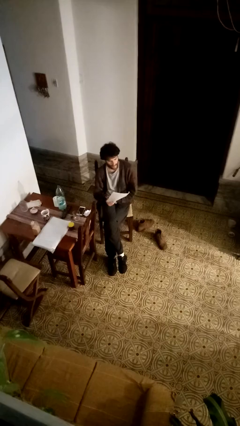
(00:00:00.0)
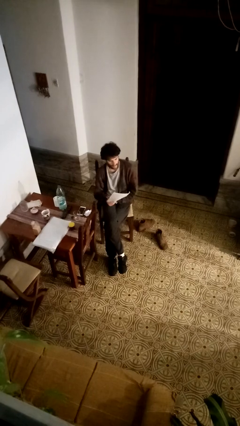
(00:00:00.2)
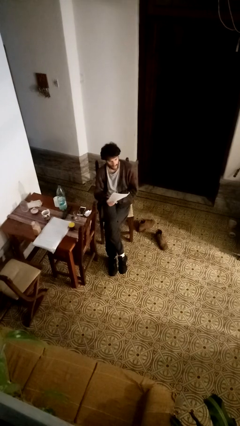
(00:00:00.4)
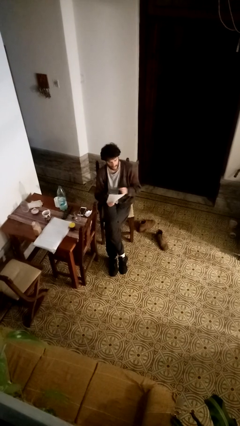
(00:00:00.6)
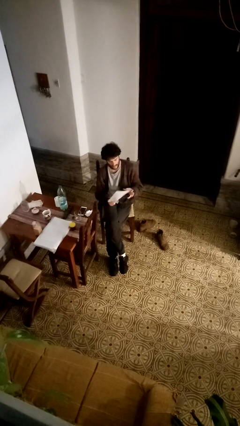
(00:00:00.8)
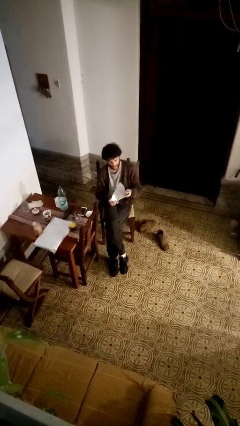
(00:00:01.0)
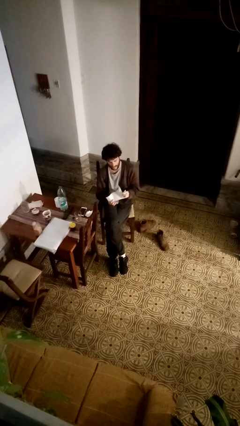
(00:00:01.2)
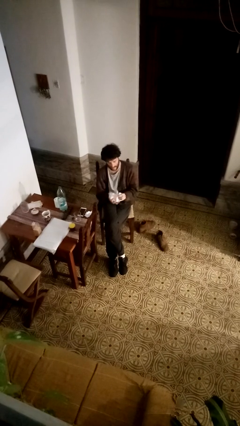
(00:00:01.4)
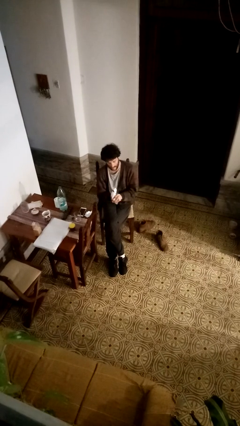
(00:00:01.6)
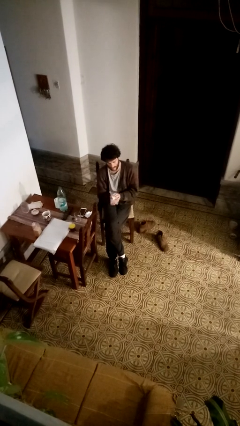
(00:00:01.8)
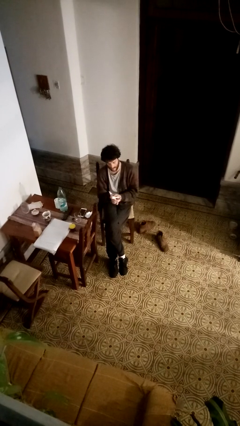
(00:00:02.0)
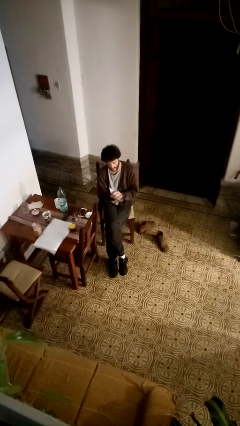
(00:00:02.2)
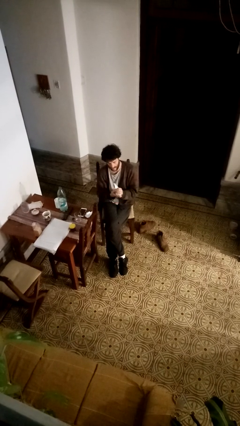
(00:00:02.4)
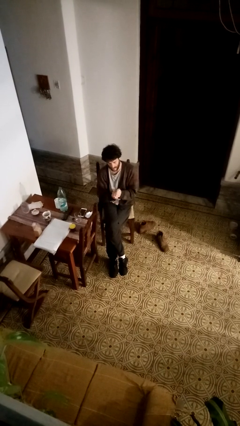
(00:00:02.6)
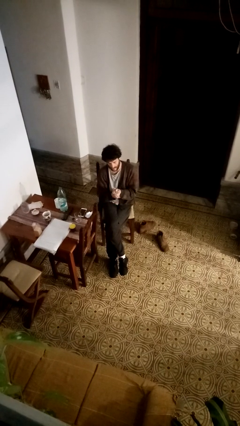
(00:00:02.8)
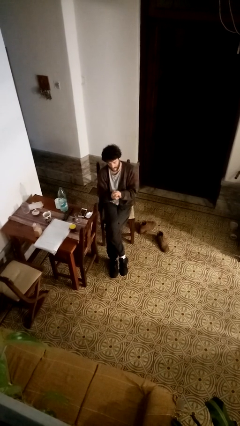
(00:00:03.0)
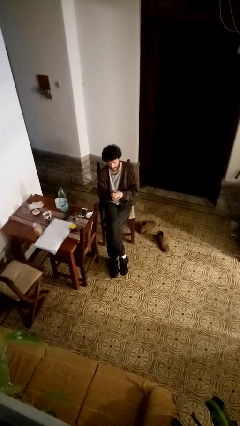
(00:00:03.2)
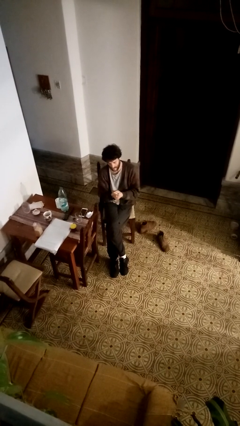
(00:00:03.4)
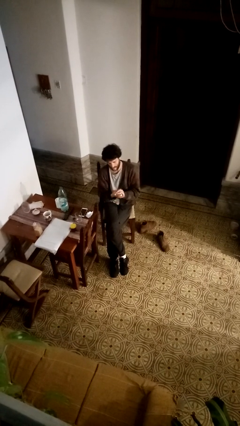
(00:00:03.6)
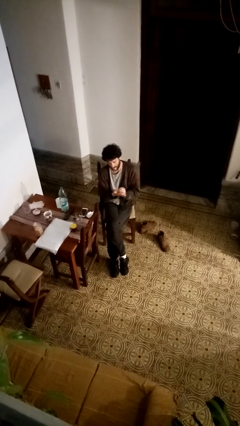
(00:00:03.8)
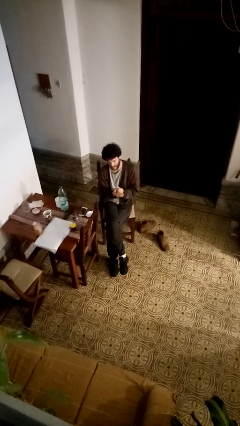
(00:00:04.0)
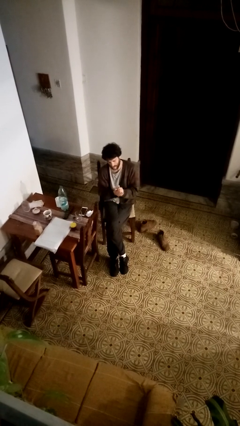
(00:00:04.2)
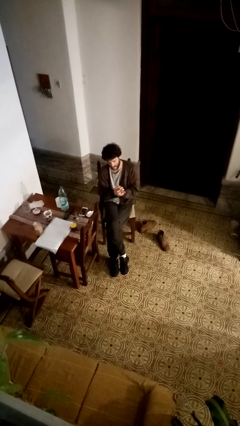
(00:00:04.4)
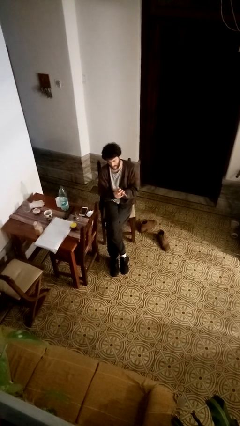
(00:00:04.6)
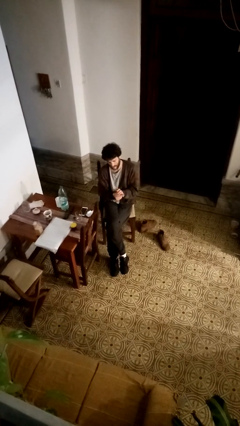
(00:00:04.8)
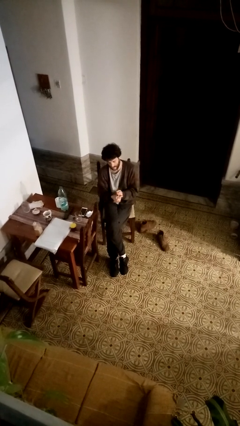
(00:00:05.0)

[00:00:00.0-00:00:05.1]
person crumples paper

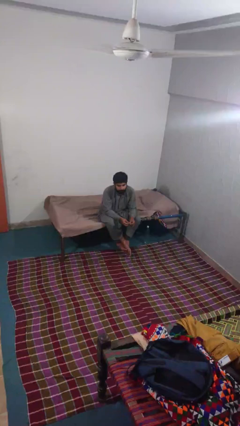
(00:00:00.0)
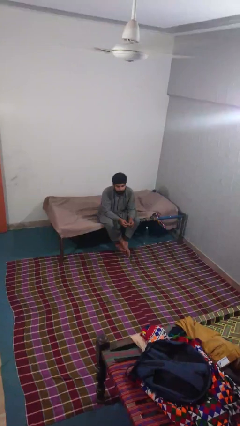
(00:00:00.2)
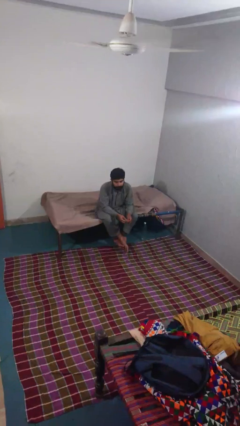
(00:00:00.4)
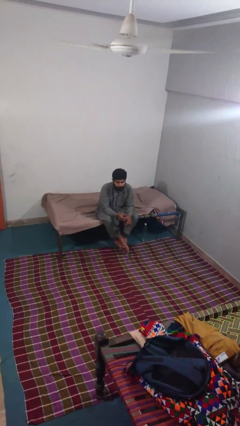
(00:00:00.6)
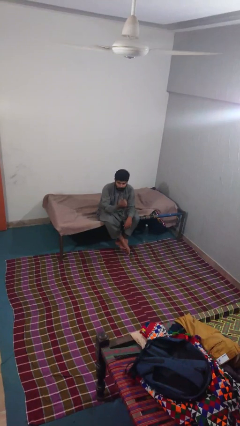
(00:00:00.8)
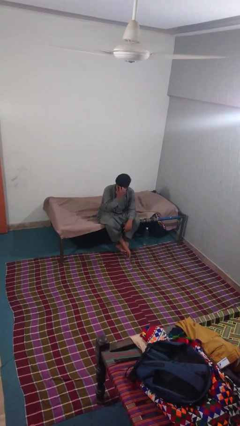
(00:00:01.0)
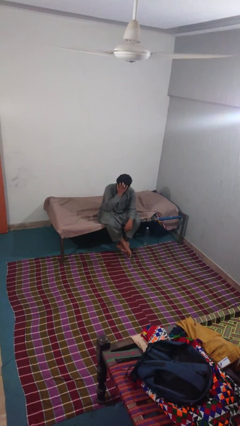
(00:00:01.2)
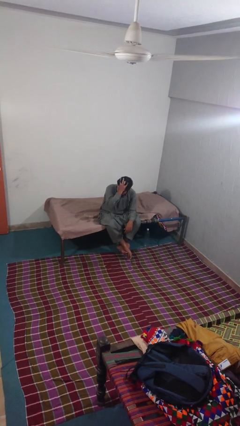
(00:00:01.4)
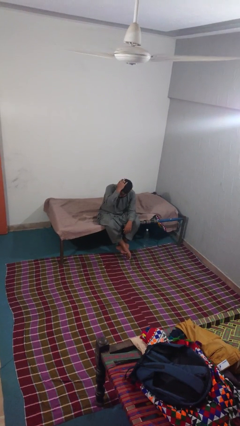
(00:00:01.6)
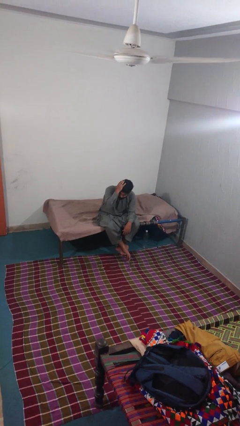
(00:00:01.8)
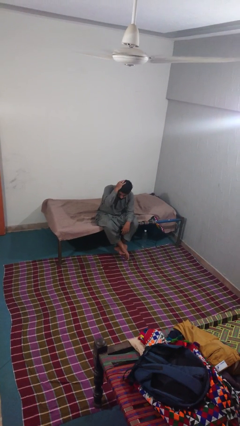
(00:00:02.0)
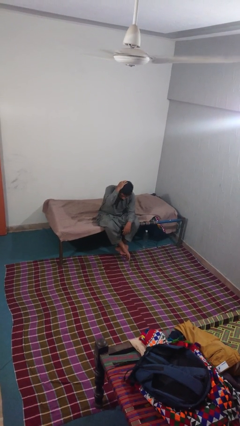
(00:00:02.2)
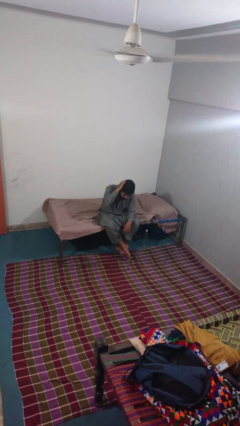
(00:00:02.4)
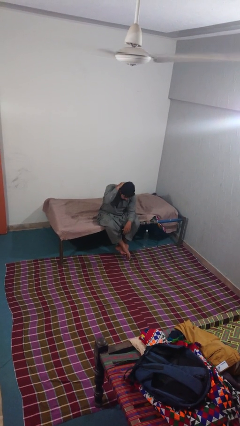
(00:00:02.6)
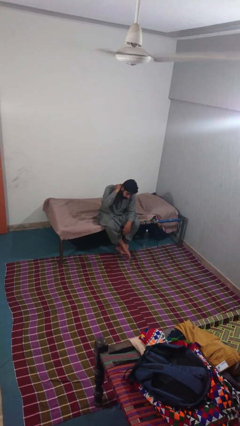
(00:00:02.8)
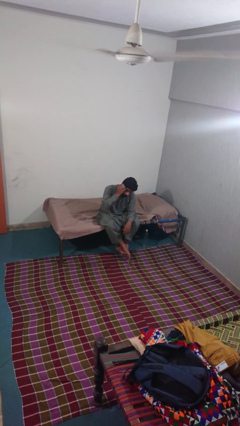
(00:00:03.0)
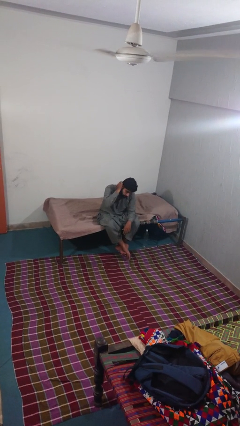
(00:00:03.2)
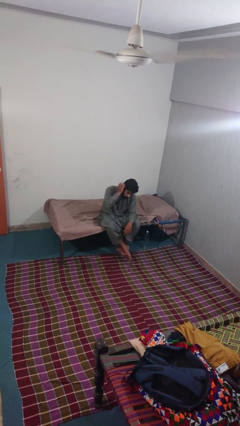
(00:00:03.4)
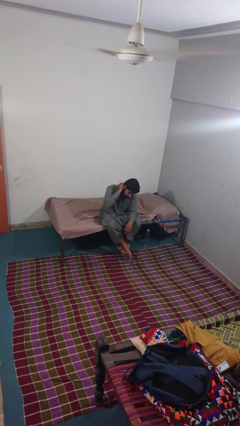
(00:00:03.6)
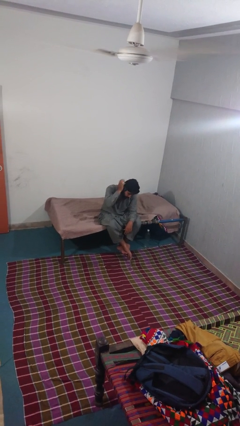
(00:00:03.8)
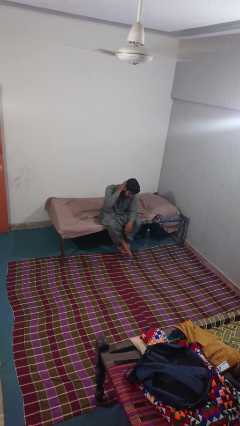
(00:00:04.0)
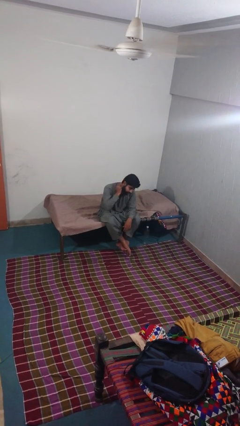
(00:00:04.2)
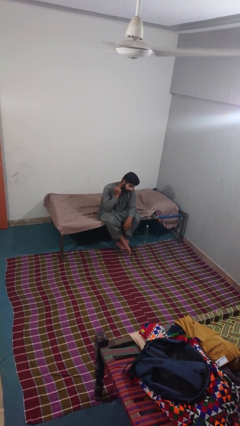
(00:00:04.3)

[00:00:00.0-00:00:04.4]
person strokes hair

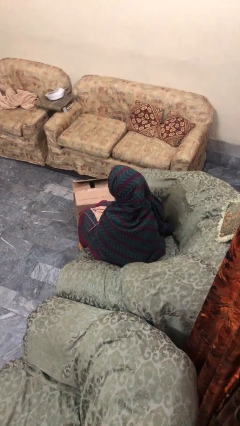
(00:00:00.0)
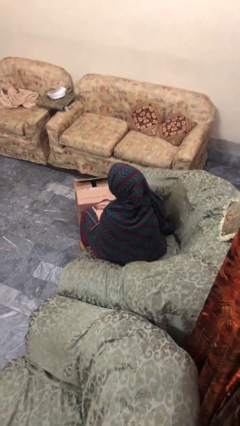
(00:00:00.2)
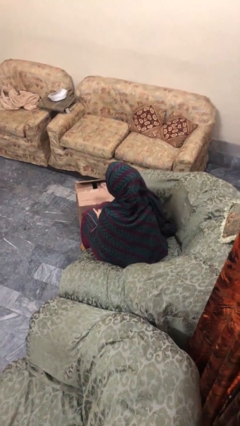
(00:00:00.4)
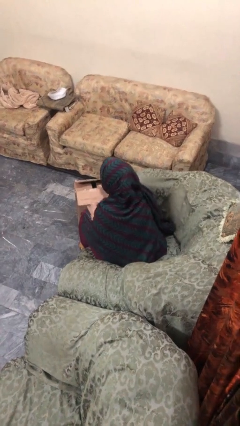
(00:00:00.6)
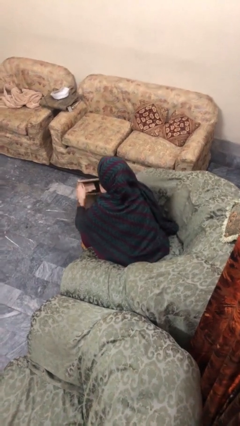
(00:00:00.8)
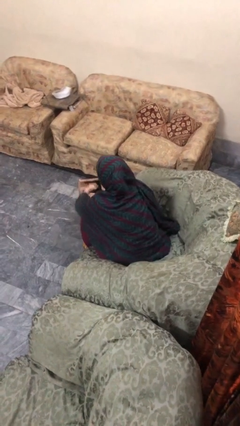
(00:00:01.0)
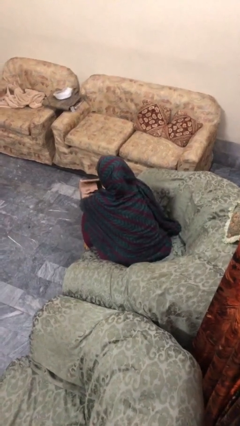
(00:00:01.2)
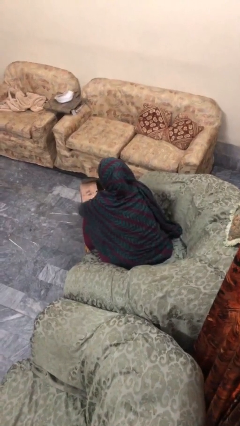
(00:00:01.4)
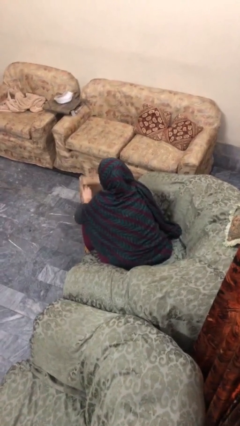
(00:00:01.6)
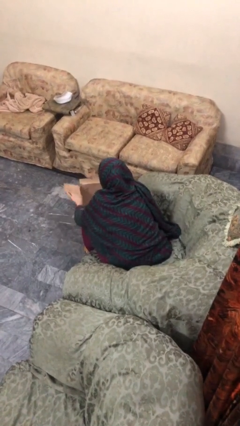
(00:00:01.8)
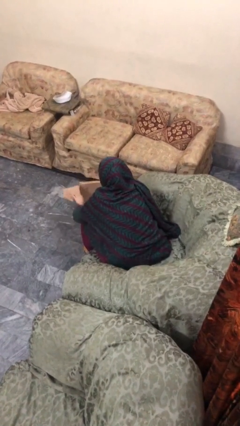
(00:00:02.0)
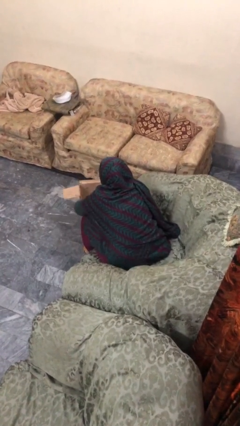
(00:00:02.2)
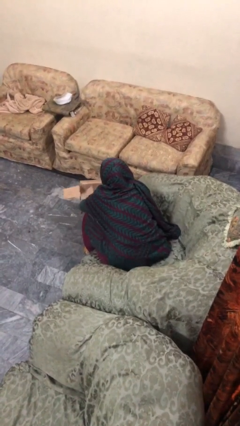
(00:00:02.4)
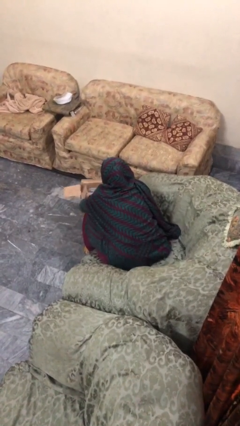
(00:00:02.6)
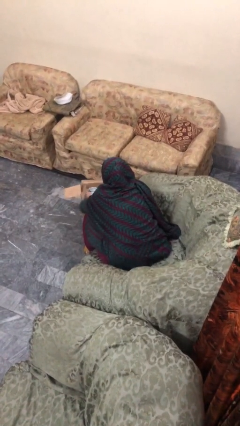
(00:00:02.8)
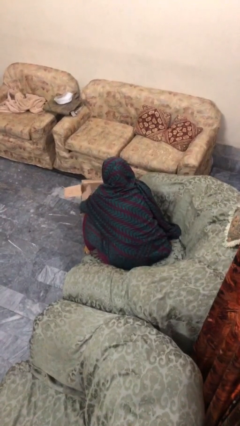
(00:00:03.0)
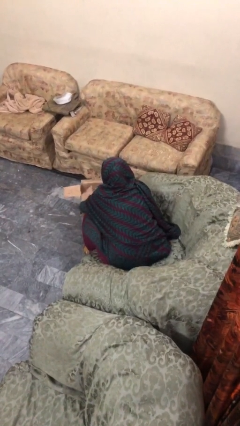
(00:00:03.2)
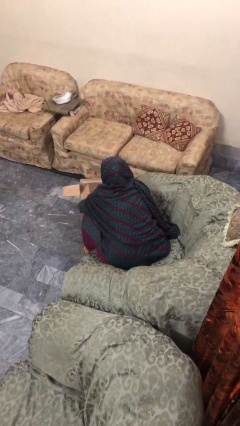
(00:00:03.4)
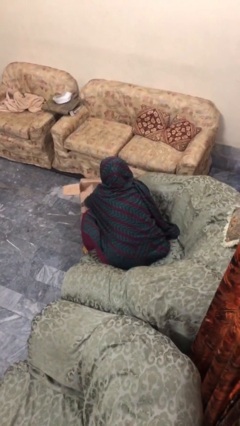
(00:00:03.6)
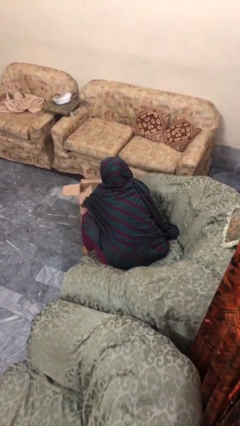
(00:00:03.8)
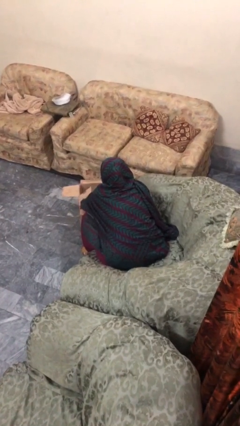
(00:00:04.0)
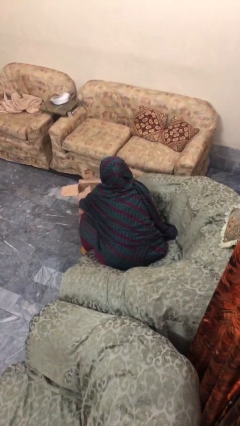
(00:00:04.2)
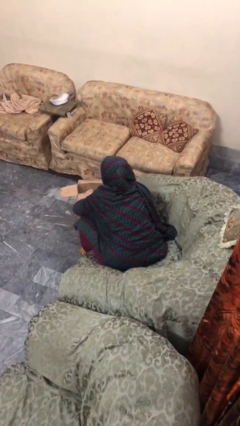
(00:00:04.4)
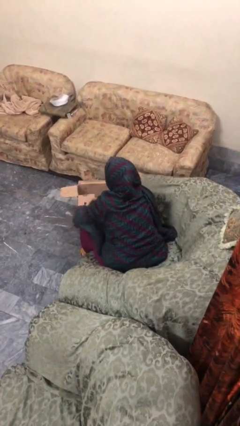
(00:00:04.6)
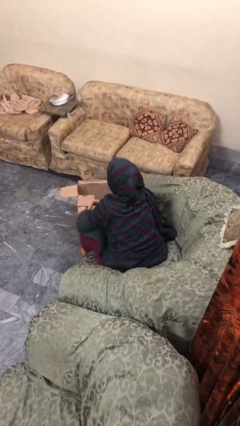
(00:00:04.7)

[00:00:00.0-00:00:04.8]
person searches in box

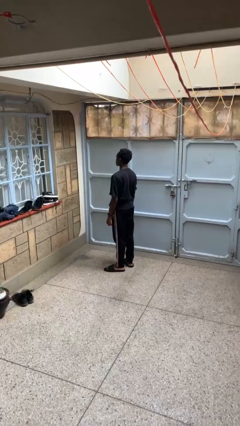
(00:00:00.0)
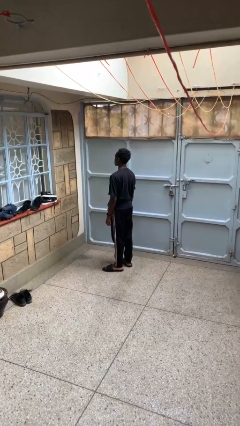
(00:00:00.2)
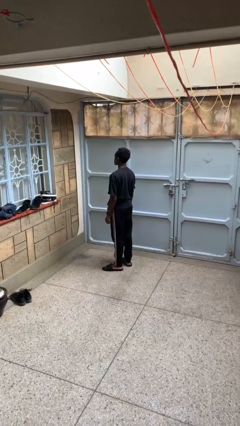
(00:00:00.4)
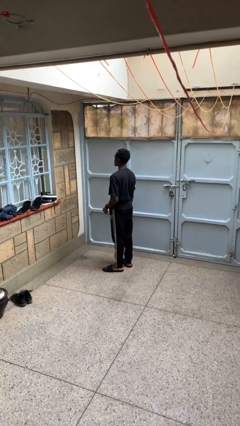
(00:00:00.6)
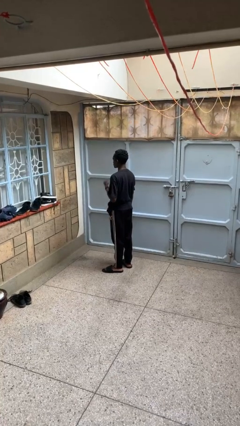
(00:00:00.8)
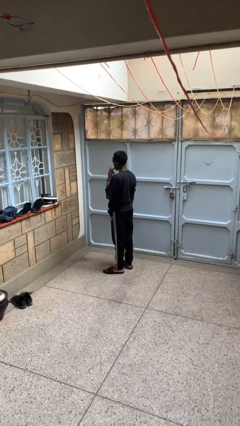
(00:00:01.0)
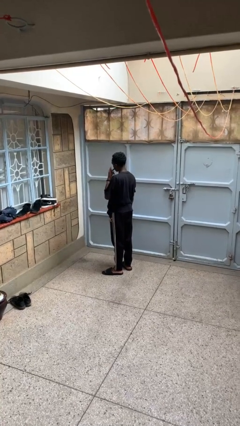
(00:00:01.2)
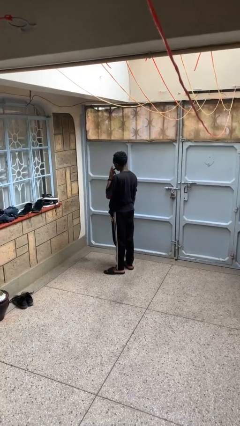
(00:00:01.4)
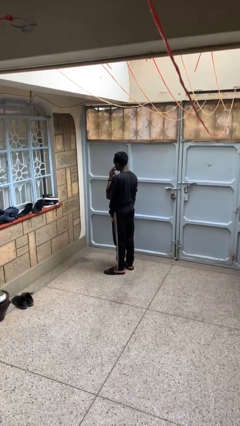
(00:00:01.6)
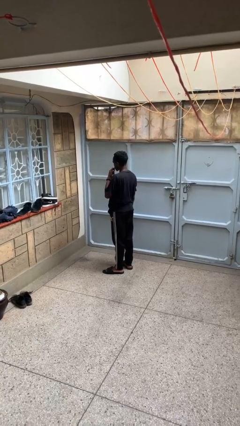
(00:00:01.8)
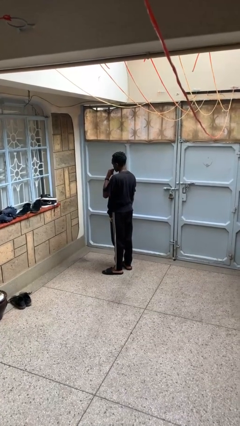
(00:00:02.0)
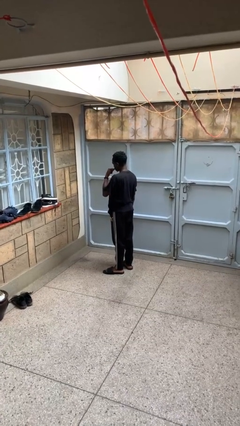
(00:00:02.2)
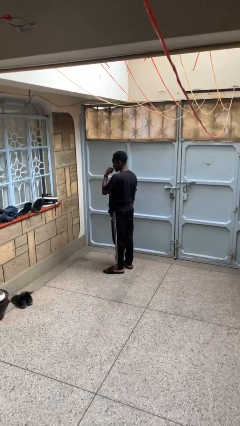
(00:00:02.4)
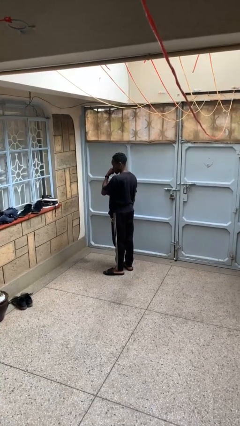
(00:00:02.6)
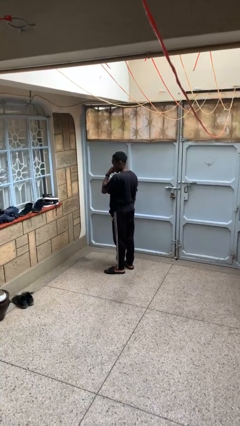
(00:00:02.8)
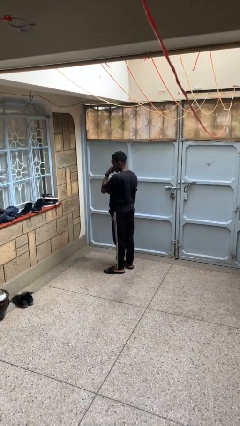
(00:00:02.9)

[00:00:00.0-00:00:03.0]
person licks fingers

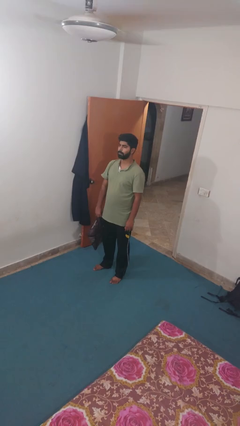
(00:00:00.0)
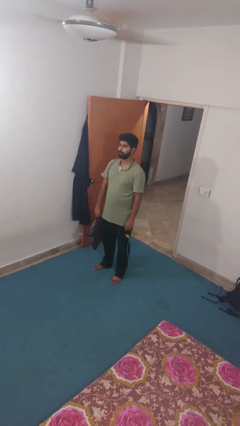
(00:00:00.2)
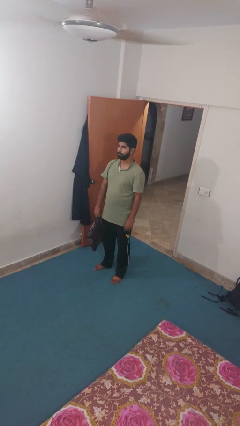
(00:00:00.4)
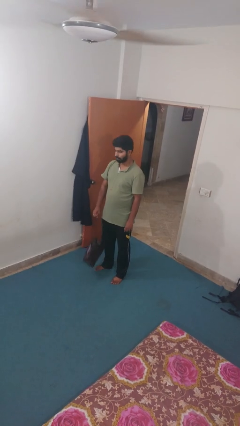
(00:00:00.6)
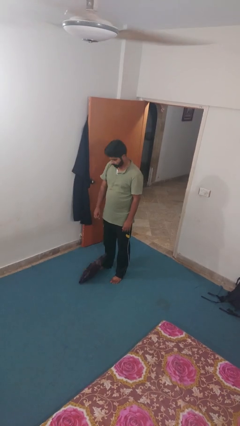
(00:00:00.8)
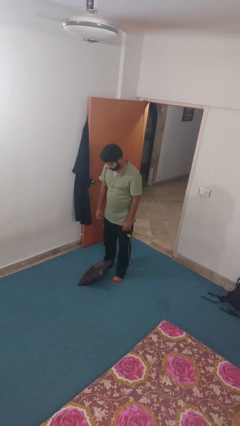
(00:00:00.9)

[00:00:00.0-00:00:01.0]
person drops object
